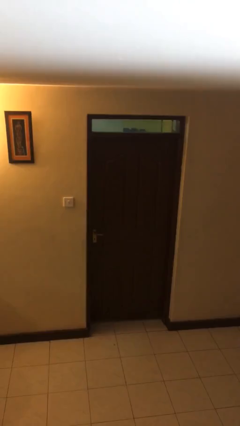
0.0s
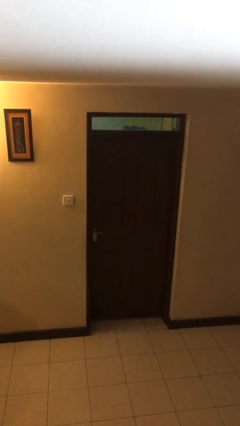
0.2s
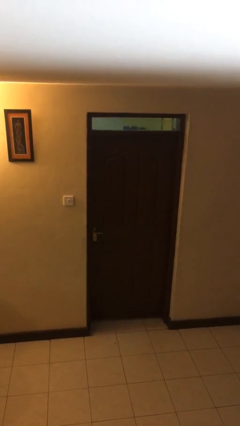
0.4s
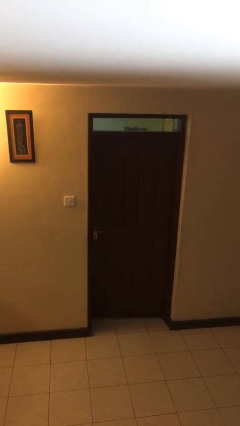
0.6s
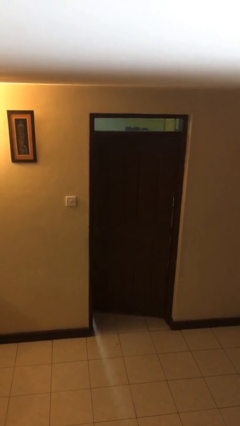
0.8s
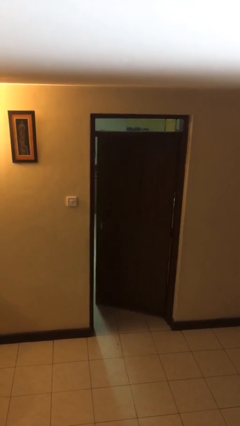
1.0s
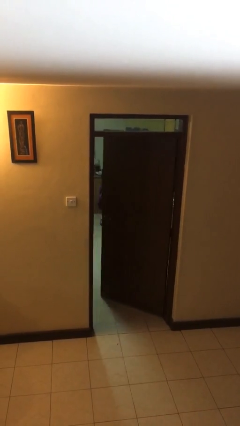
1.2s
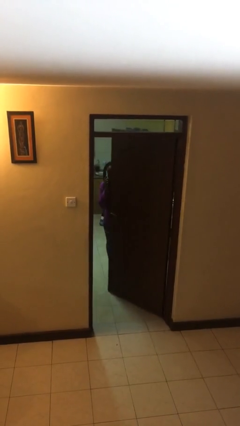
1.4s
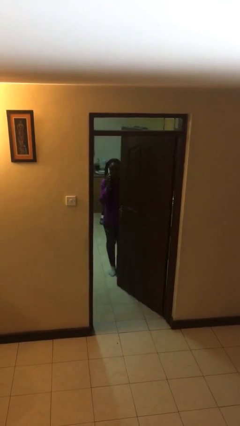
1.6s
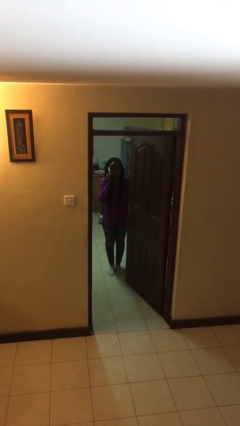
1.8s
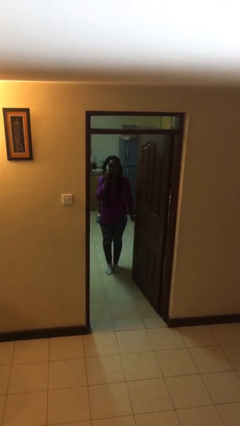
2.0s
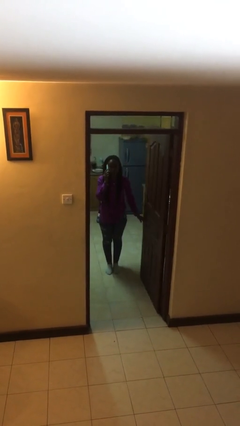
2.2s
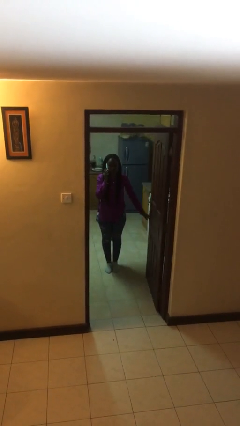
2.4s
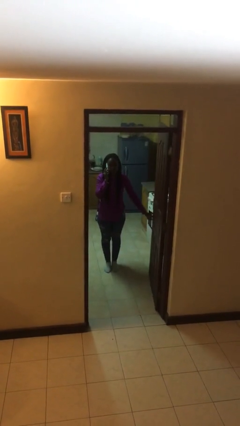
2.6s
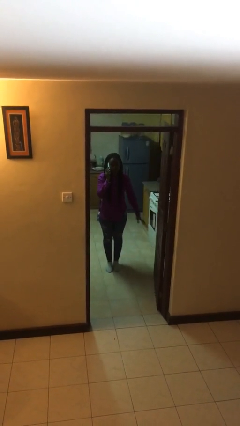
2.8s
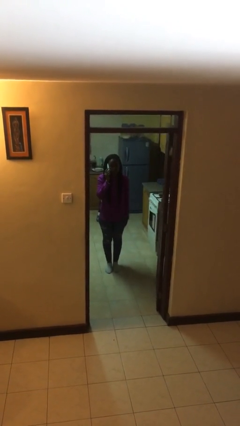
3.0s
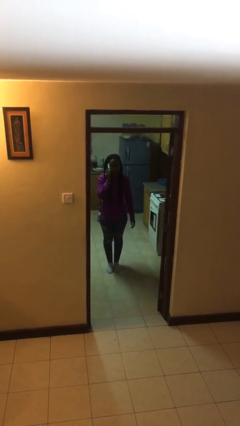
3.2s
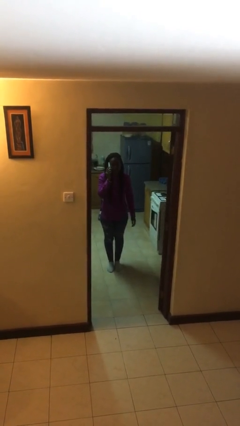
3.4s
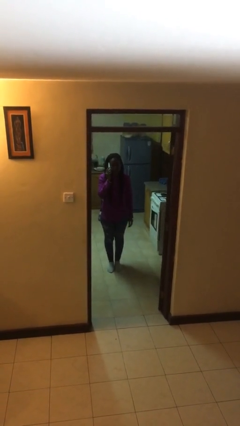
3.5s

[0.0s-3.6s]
person opens facility door

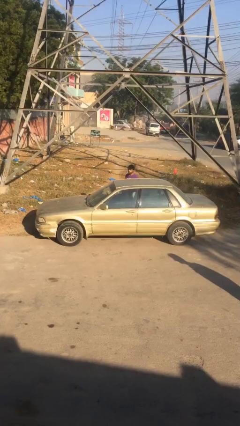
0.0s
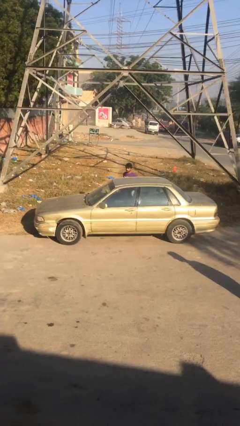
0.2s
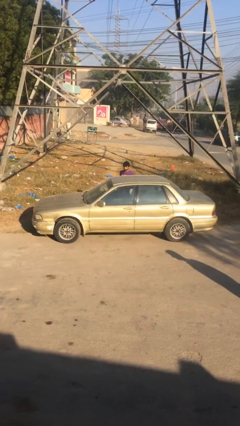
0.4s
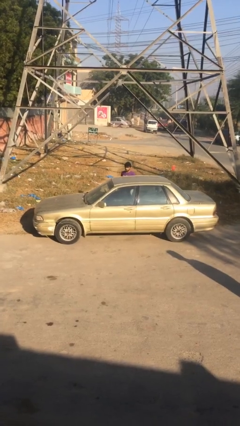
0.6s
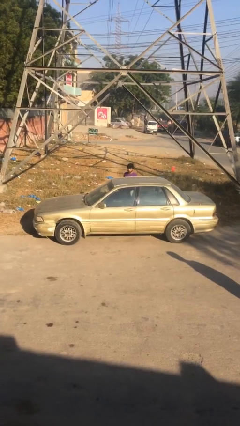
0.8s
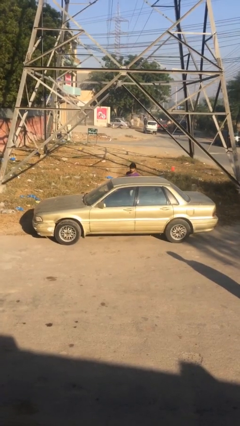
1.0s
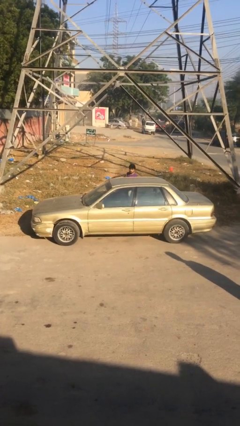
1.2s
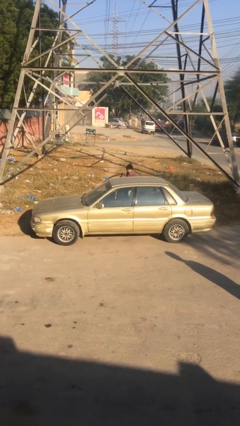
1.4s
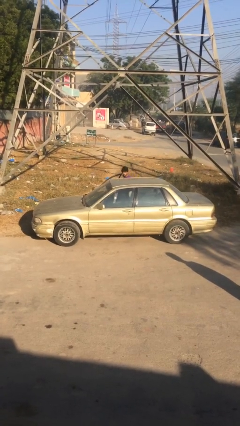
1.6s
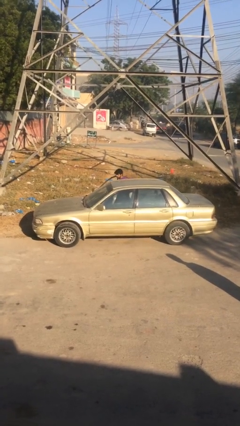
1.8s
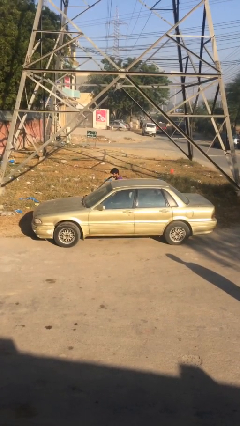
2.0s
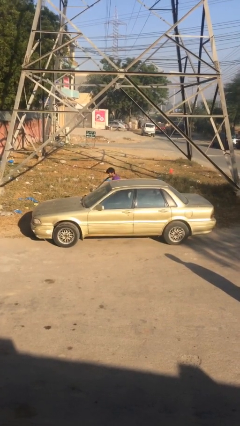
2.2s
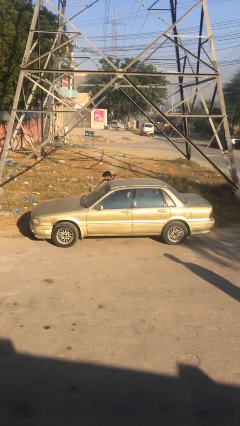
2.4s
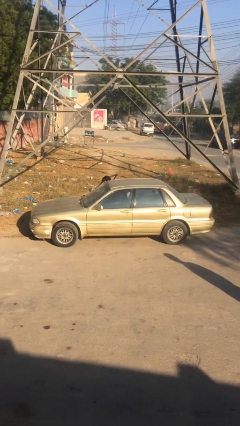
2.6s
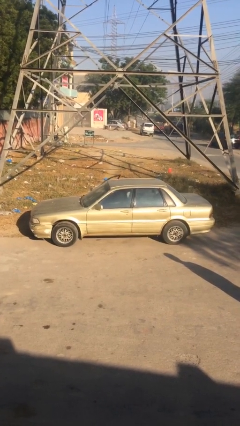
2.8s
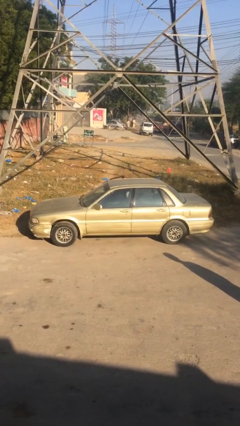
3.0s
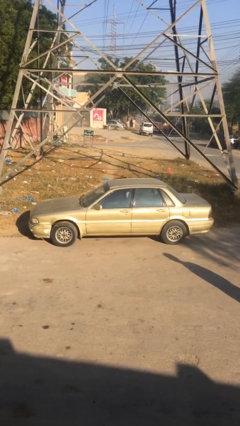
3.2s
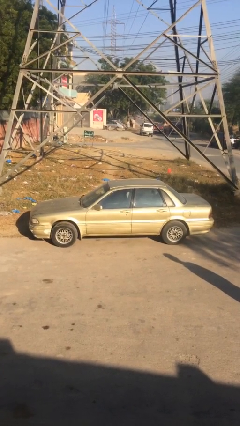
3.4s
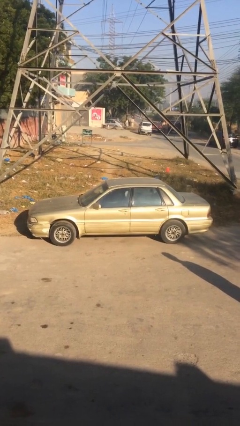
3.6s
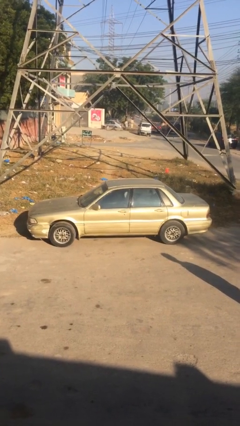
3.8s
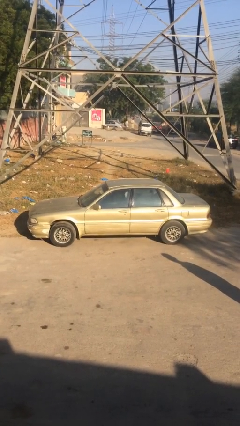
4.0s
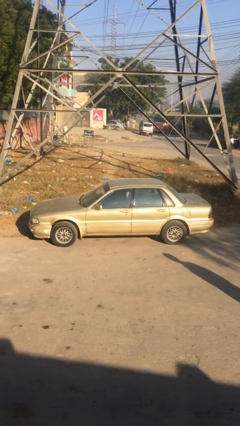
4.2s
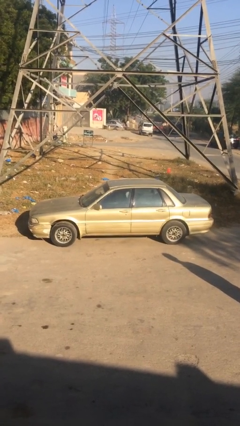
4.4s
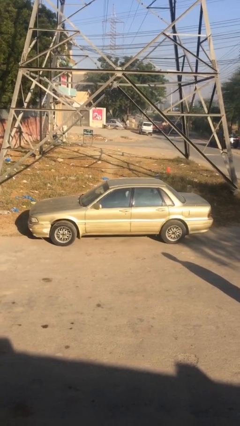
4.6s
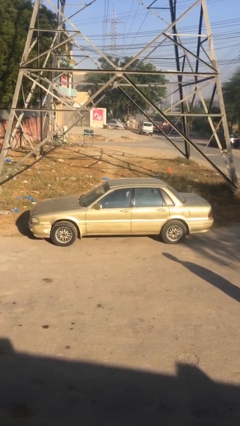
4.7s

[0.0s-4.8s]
car picks up person

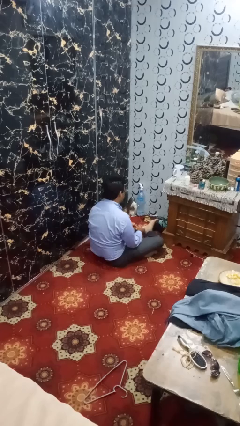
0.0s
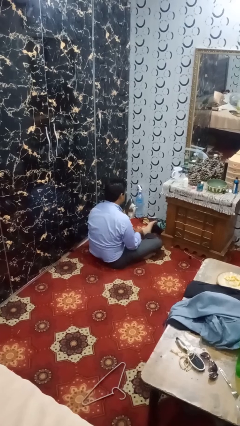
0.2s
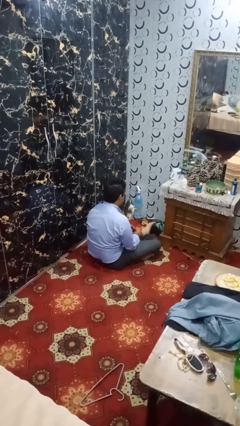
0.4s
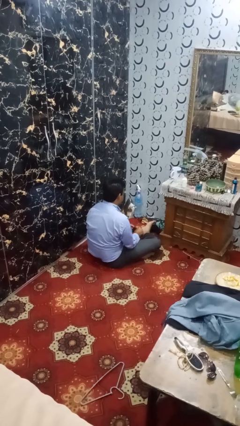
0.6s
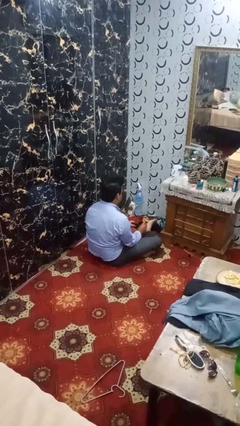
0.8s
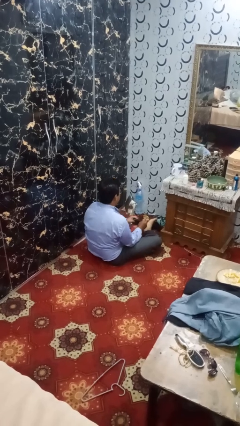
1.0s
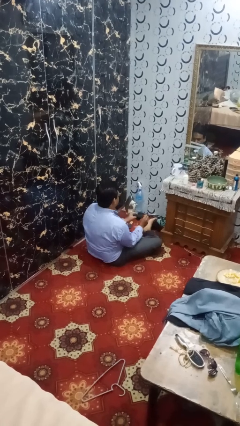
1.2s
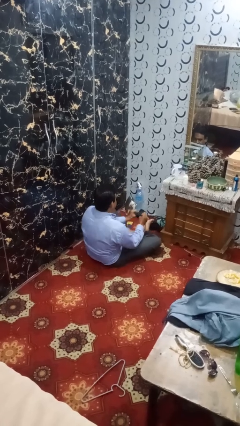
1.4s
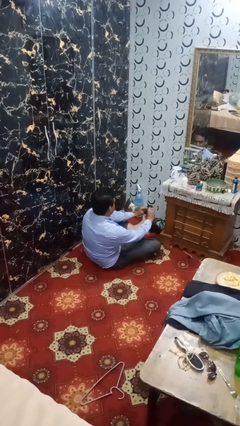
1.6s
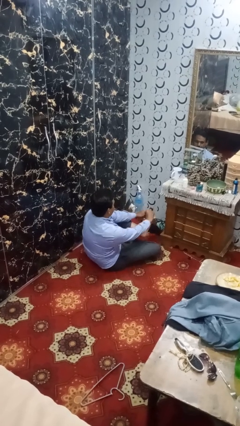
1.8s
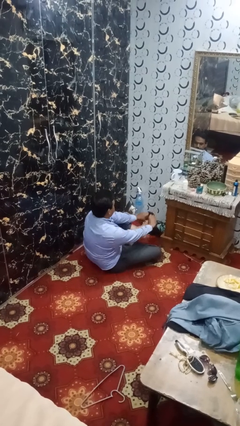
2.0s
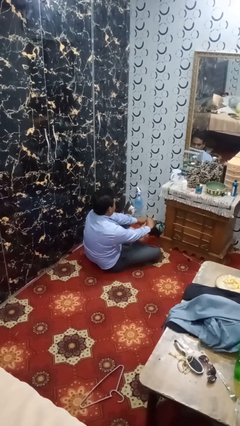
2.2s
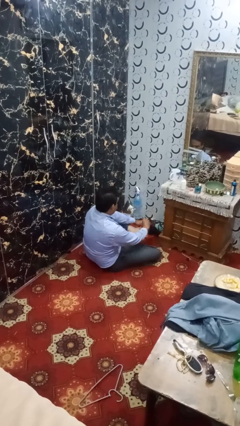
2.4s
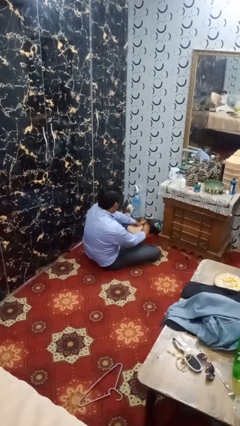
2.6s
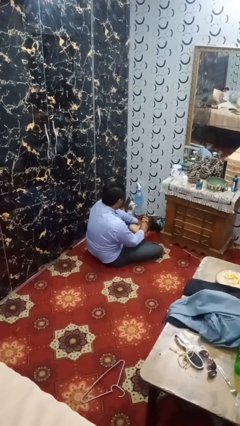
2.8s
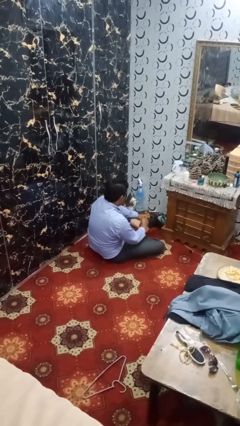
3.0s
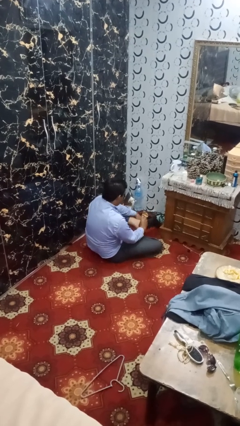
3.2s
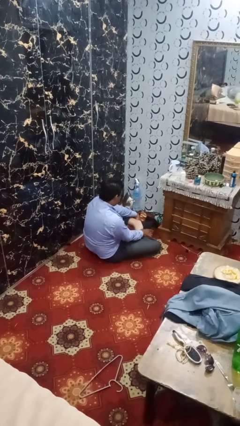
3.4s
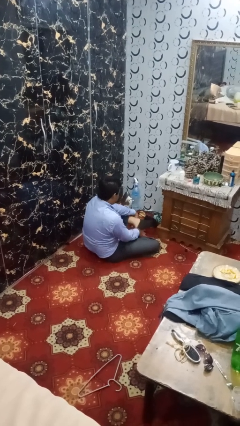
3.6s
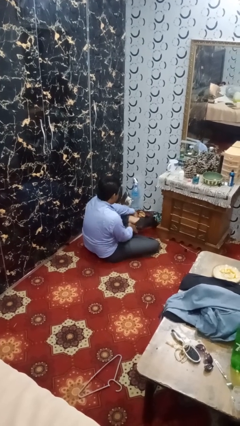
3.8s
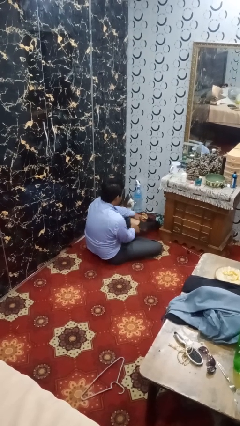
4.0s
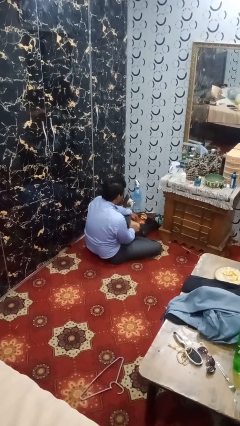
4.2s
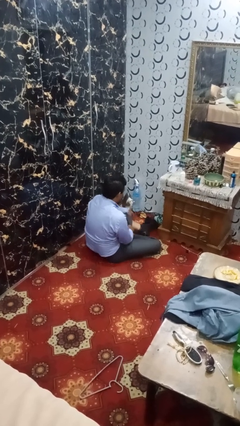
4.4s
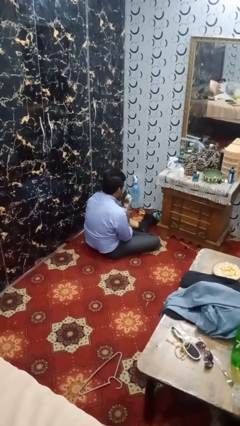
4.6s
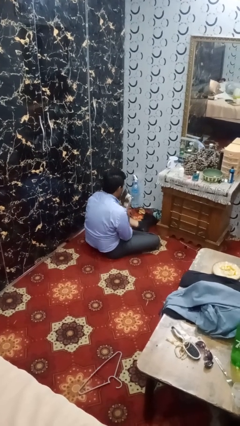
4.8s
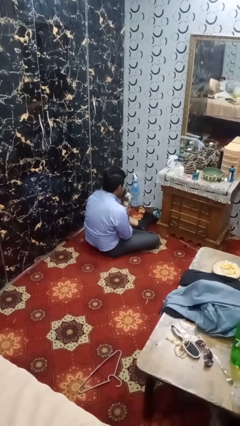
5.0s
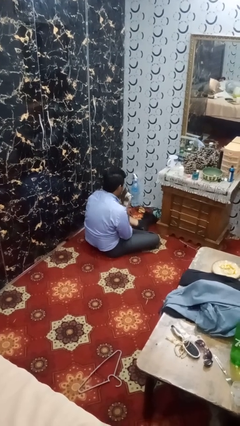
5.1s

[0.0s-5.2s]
person puts on socks

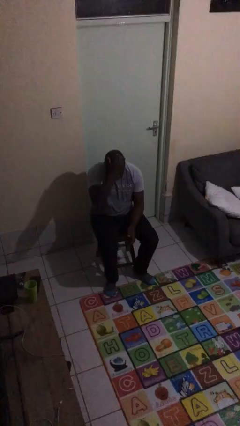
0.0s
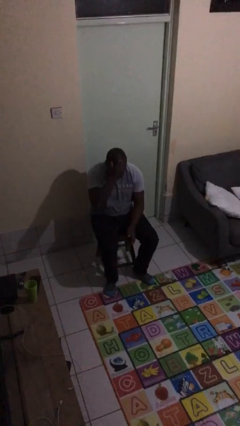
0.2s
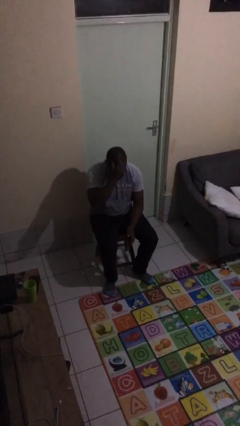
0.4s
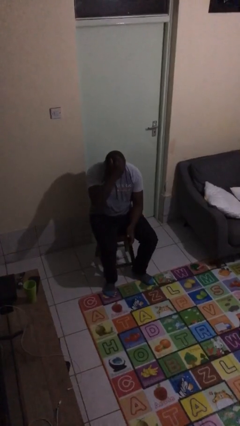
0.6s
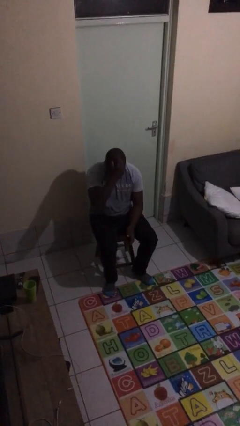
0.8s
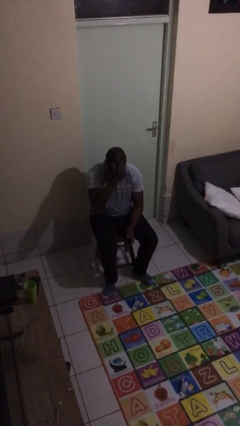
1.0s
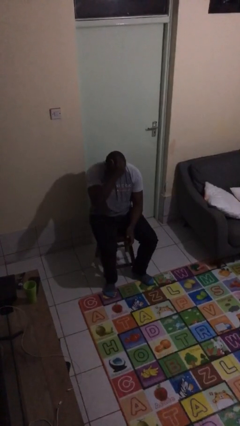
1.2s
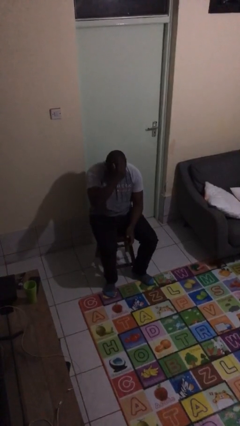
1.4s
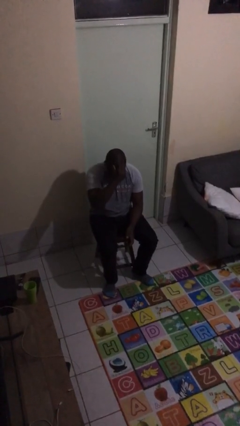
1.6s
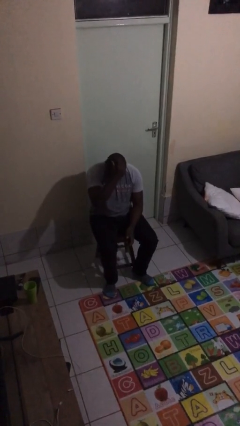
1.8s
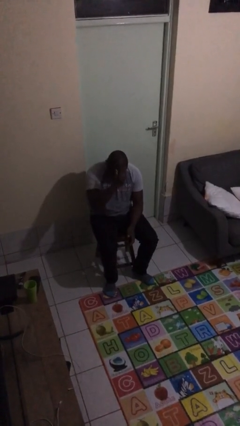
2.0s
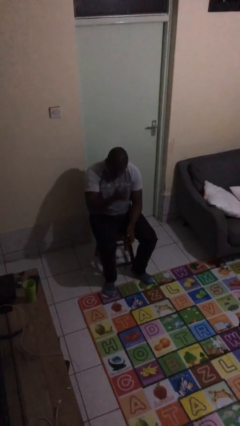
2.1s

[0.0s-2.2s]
person scratches face

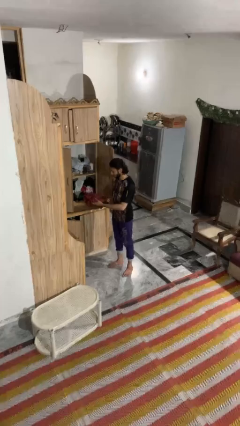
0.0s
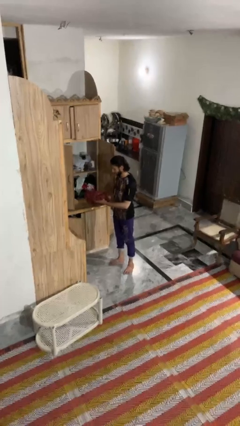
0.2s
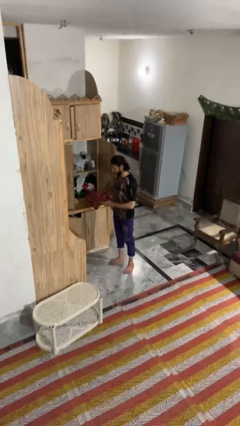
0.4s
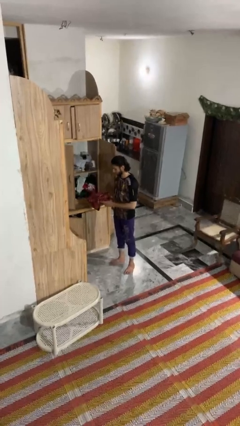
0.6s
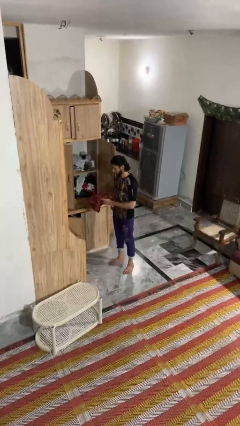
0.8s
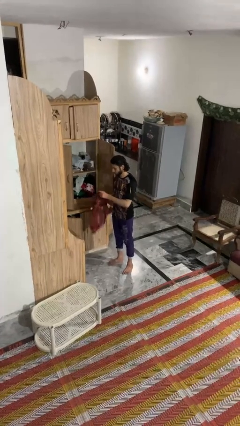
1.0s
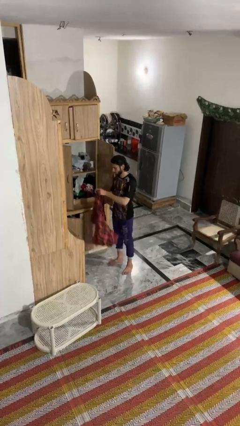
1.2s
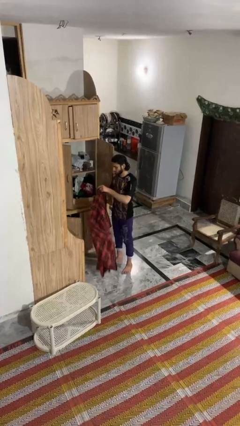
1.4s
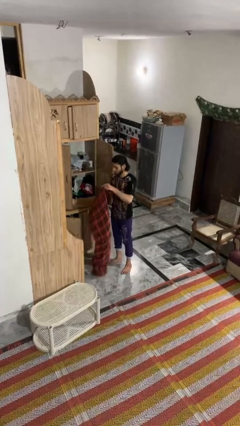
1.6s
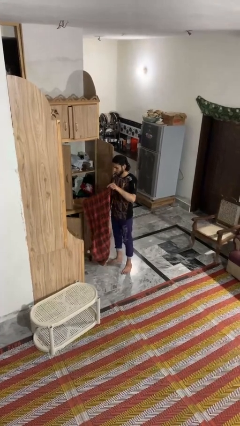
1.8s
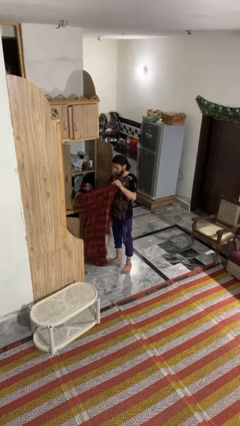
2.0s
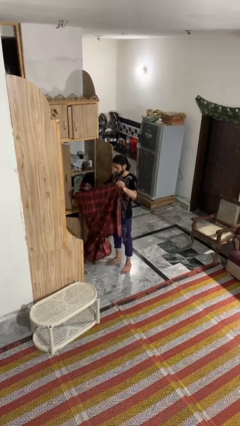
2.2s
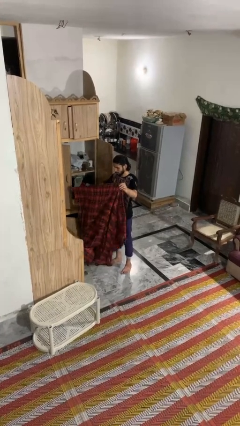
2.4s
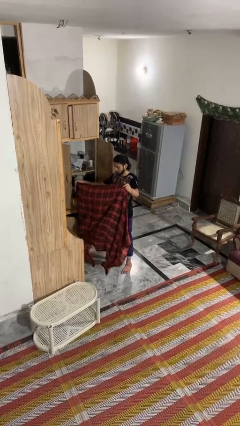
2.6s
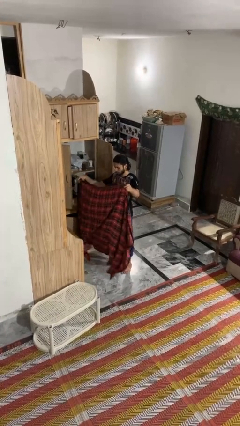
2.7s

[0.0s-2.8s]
person unfolds blanket
